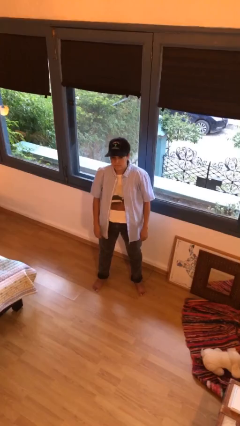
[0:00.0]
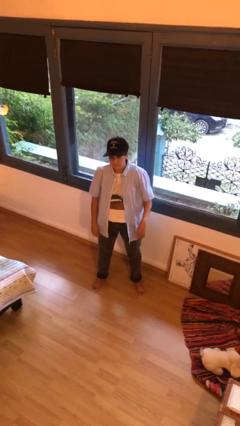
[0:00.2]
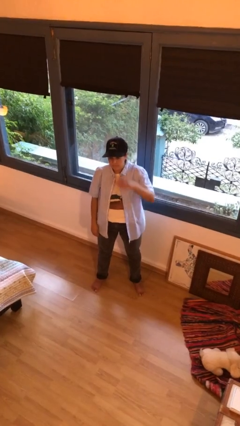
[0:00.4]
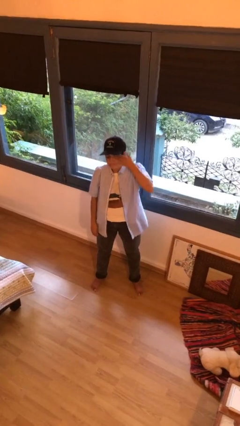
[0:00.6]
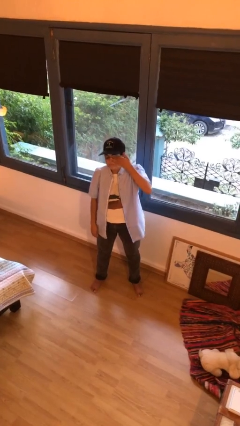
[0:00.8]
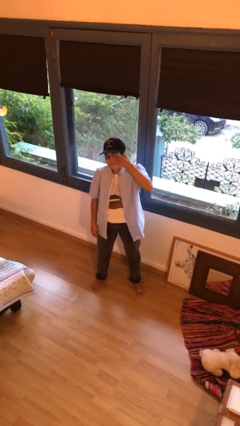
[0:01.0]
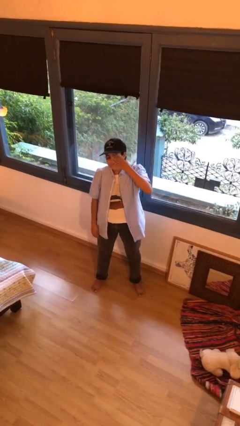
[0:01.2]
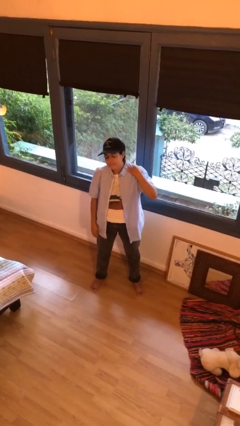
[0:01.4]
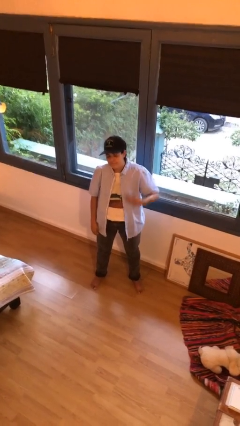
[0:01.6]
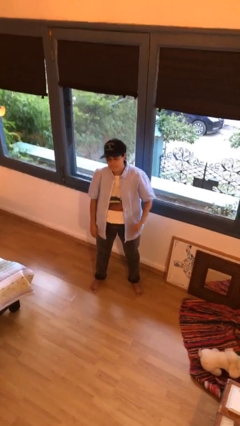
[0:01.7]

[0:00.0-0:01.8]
person rubs eyes

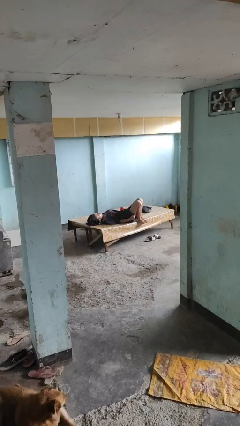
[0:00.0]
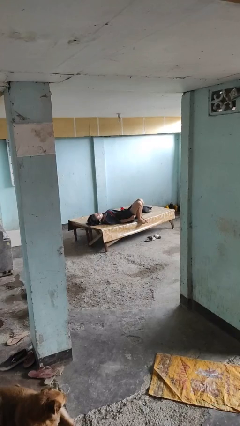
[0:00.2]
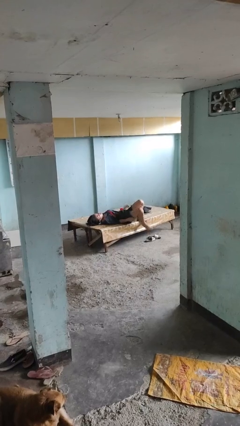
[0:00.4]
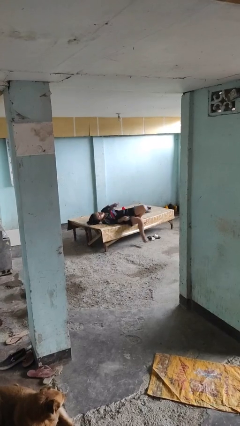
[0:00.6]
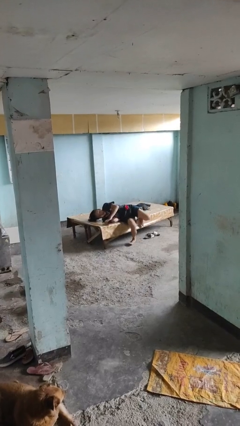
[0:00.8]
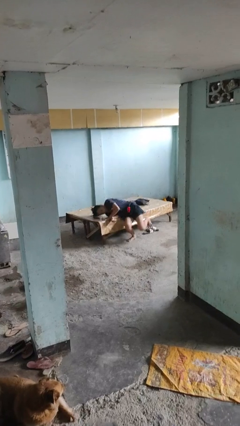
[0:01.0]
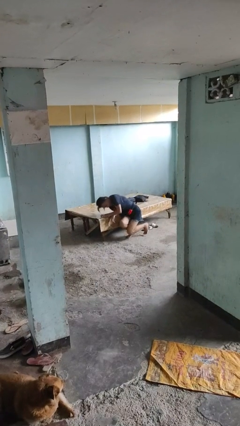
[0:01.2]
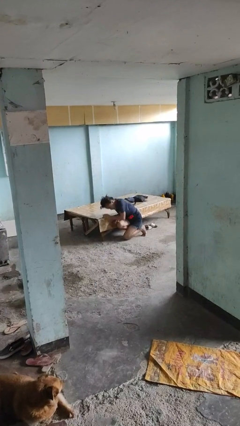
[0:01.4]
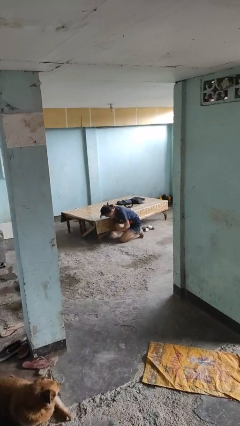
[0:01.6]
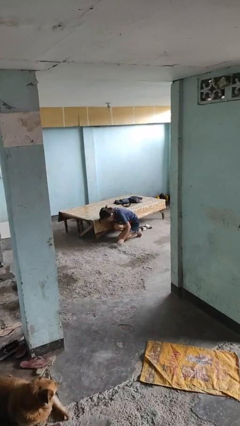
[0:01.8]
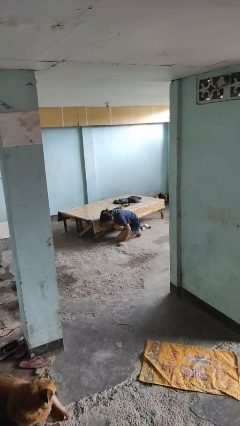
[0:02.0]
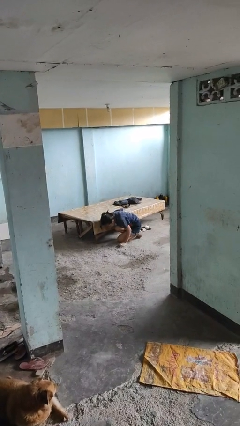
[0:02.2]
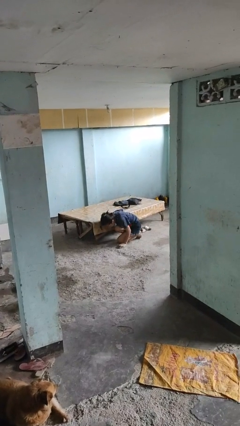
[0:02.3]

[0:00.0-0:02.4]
person falls from bed

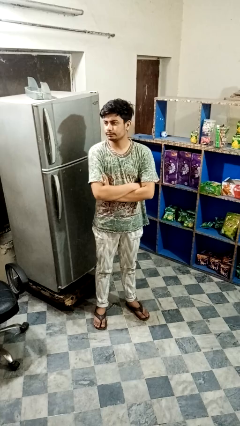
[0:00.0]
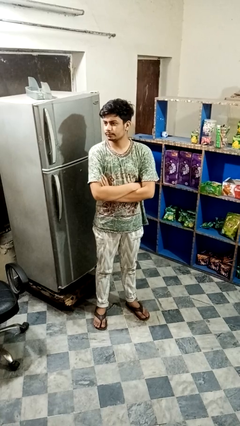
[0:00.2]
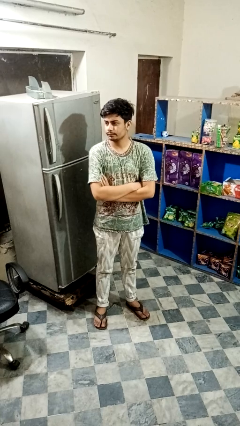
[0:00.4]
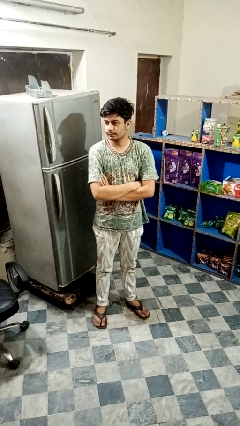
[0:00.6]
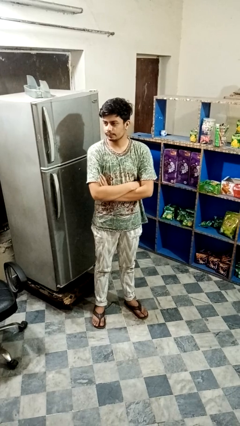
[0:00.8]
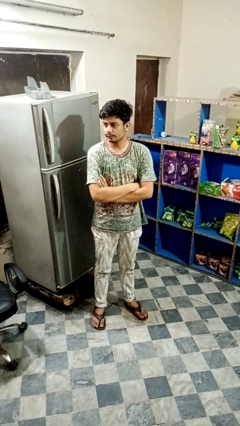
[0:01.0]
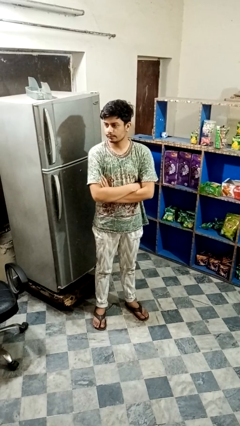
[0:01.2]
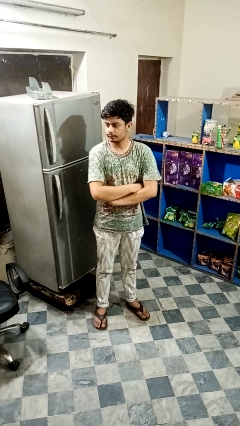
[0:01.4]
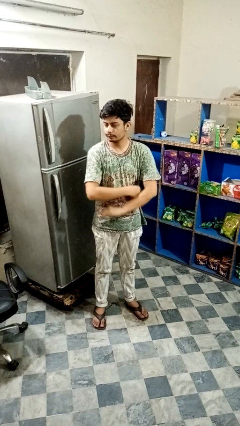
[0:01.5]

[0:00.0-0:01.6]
person crosses arms

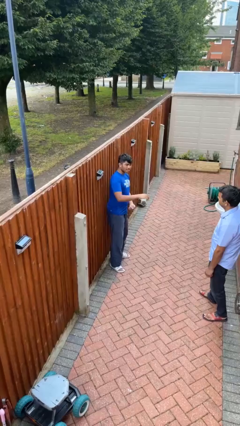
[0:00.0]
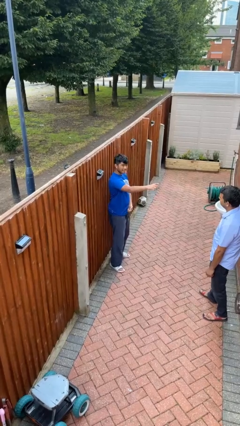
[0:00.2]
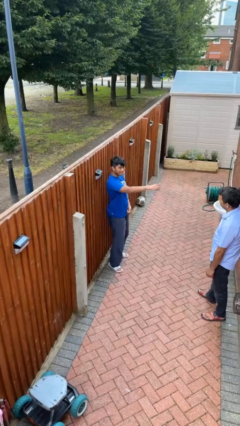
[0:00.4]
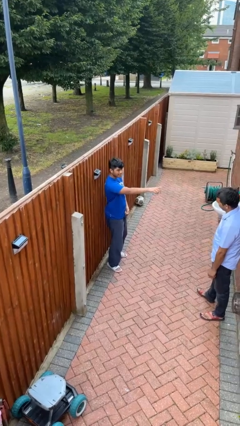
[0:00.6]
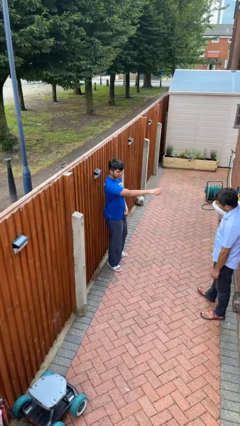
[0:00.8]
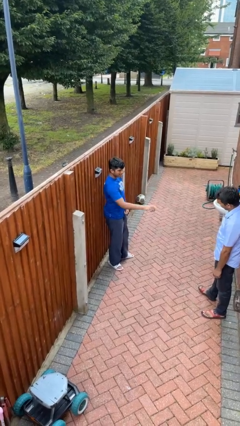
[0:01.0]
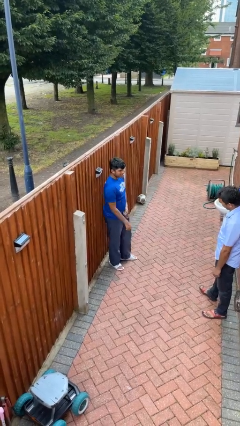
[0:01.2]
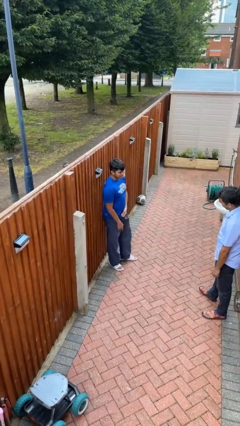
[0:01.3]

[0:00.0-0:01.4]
person points at person

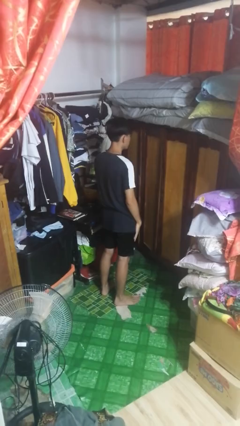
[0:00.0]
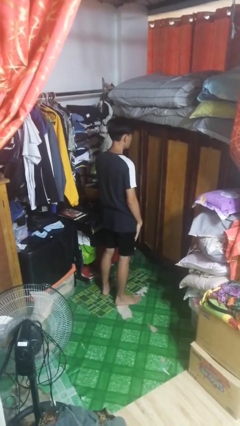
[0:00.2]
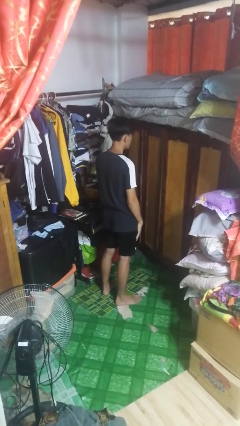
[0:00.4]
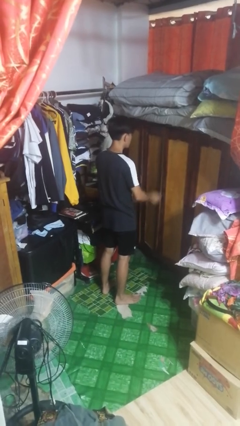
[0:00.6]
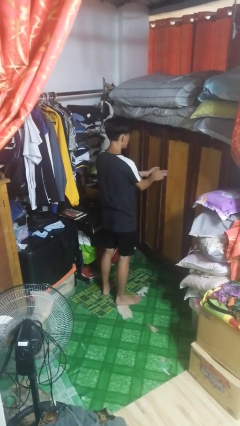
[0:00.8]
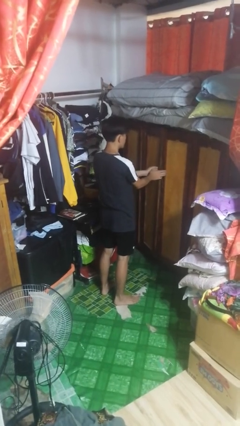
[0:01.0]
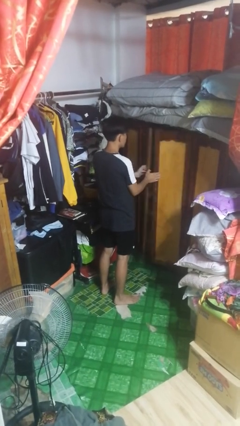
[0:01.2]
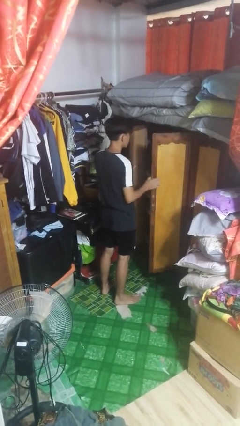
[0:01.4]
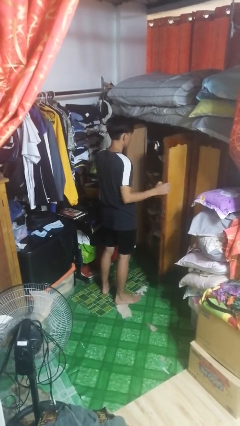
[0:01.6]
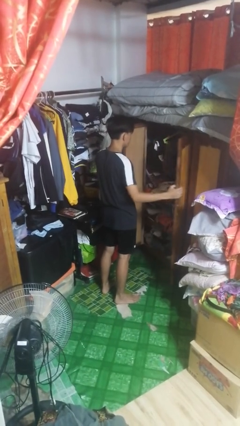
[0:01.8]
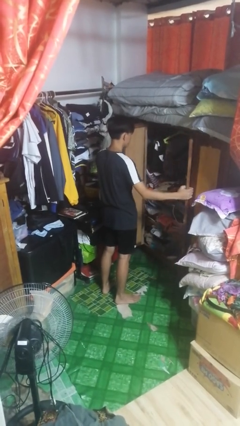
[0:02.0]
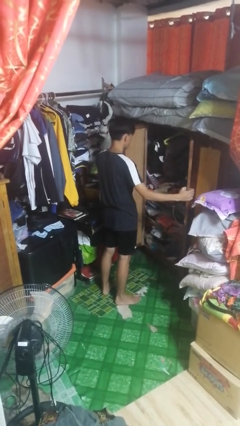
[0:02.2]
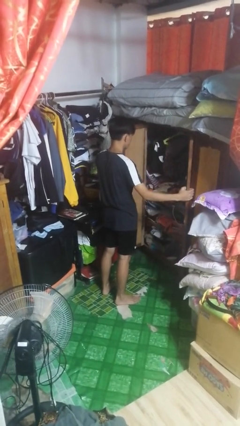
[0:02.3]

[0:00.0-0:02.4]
person opens dresser drawer

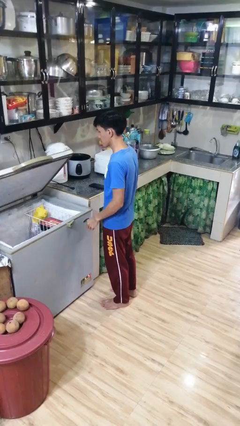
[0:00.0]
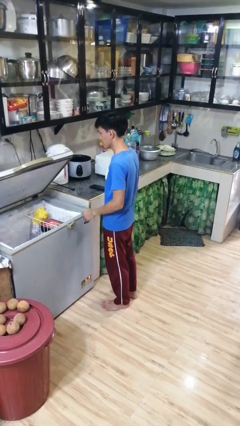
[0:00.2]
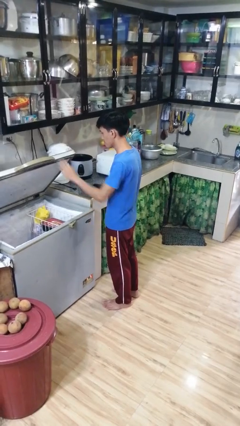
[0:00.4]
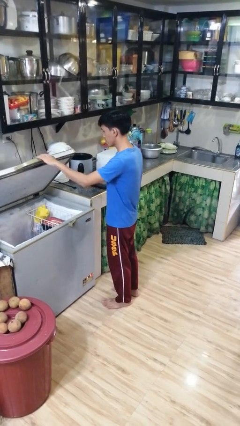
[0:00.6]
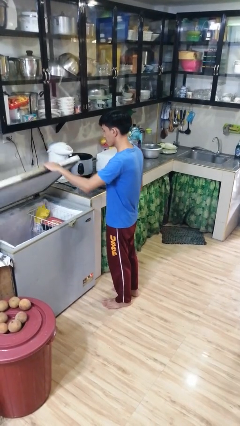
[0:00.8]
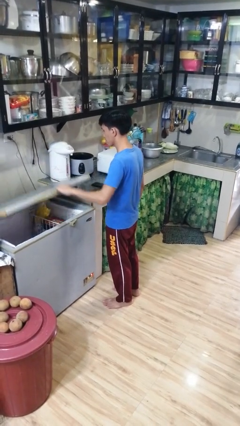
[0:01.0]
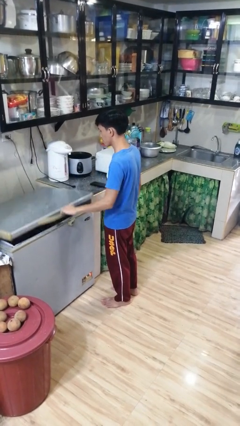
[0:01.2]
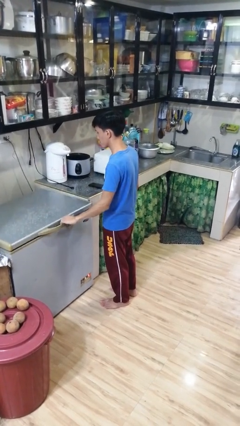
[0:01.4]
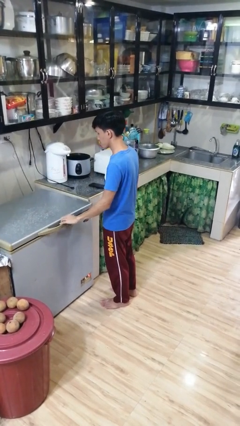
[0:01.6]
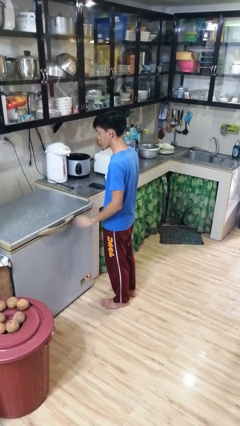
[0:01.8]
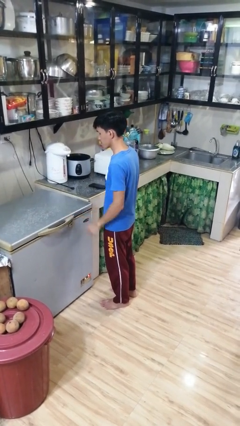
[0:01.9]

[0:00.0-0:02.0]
person closes refrigerator

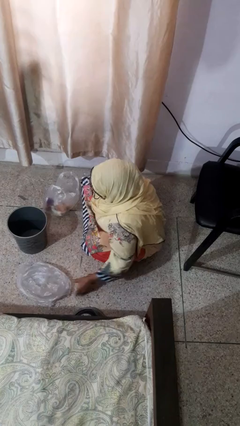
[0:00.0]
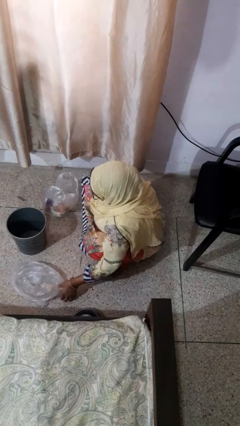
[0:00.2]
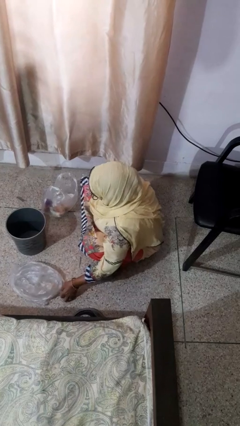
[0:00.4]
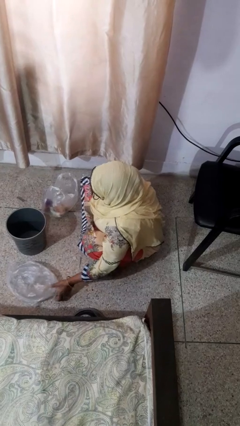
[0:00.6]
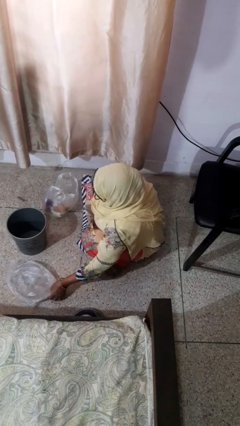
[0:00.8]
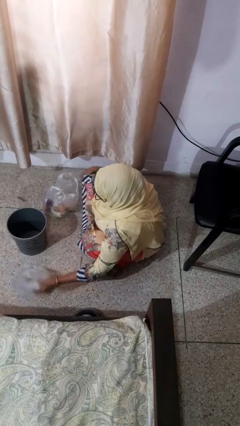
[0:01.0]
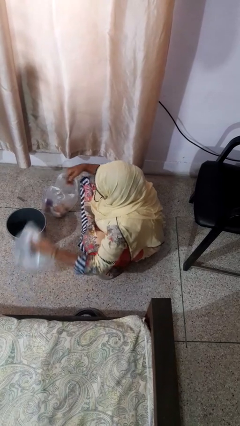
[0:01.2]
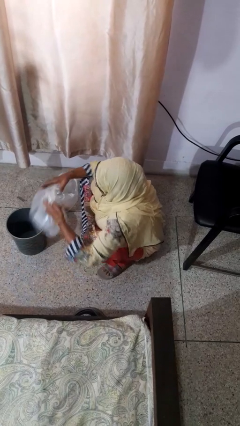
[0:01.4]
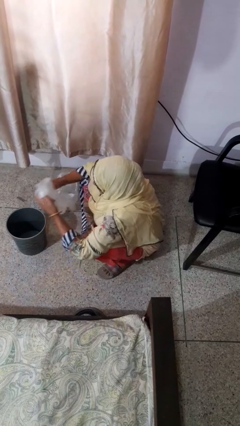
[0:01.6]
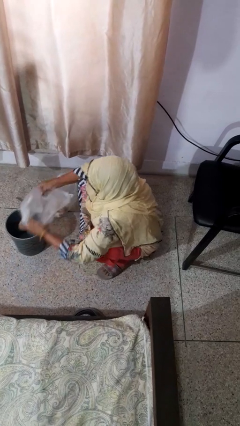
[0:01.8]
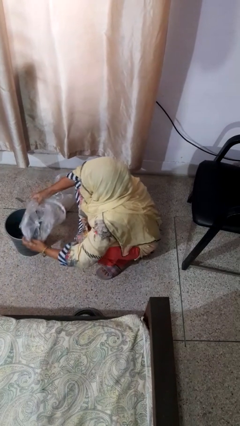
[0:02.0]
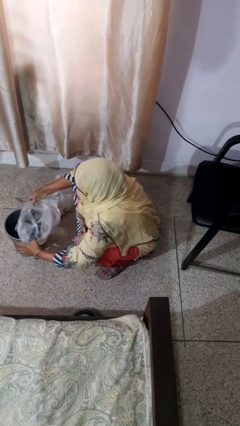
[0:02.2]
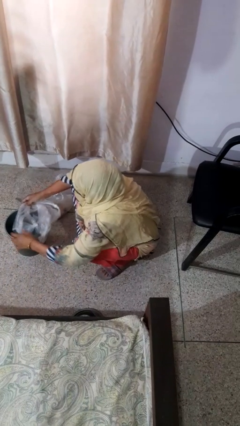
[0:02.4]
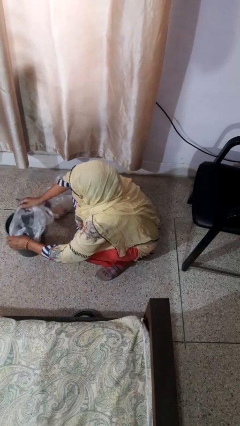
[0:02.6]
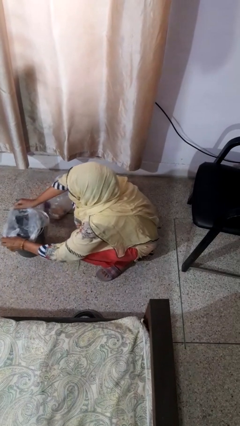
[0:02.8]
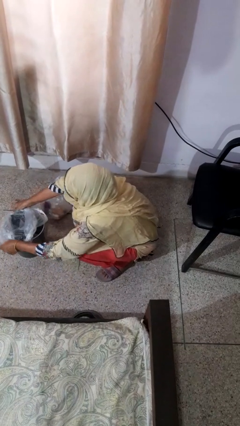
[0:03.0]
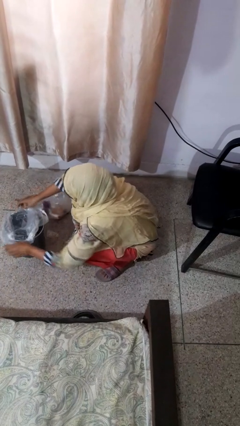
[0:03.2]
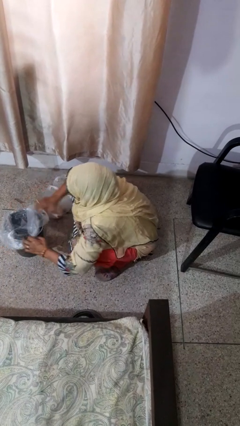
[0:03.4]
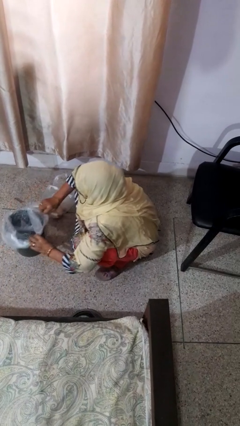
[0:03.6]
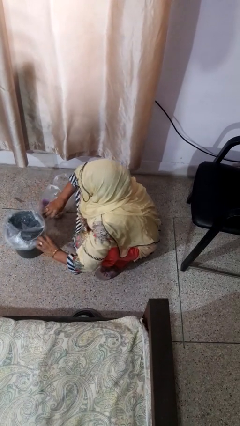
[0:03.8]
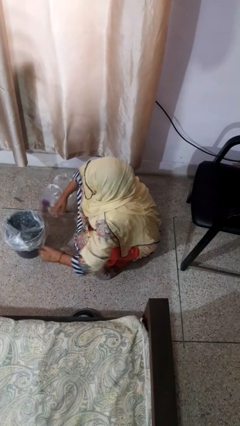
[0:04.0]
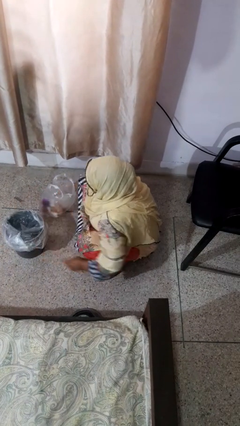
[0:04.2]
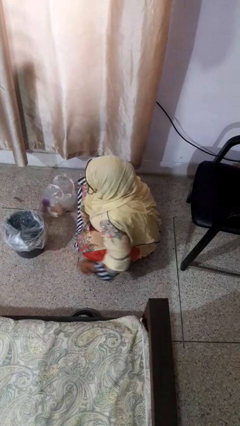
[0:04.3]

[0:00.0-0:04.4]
person inserts trashbag into trashcan

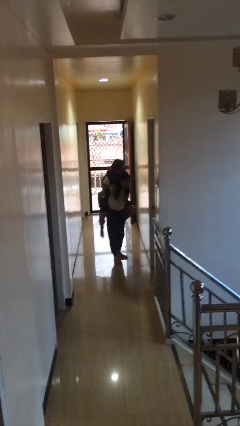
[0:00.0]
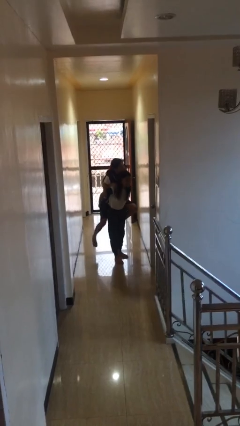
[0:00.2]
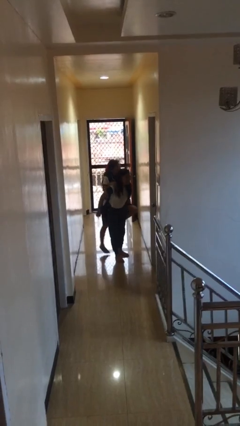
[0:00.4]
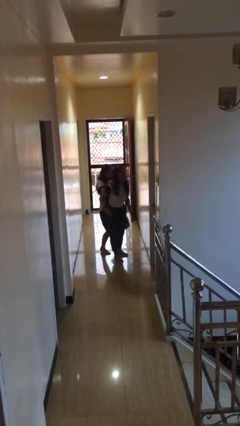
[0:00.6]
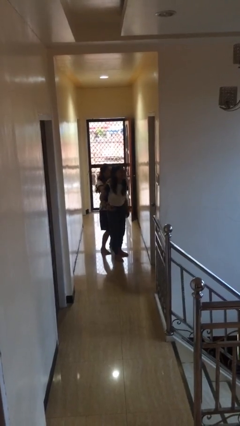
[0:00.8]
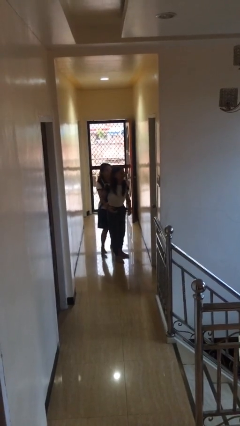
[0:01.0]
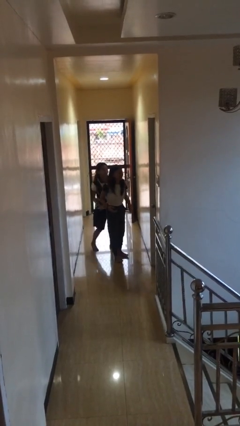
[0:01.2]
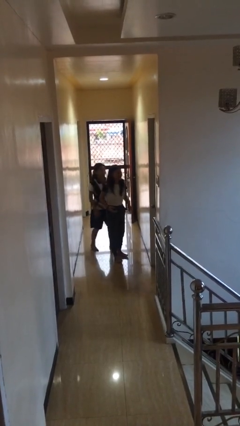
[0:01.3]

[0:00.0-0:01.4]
person puts down person
